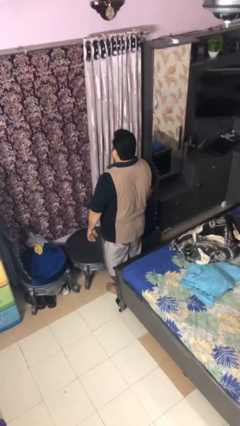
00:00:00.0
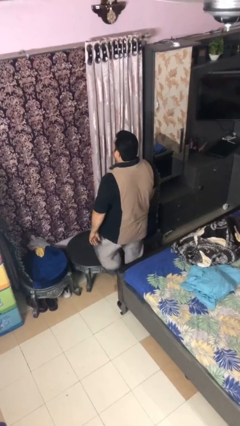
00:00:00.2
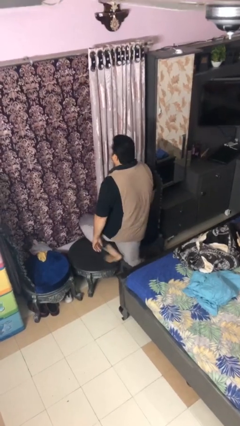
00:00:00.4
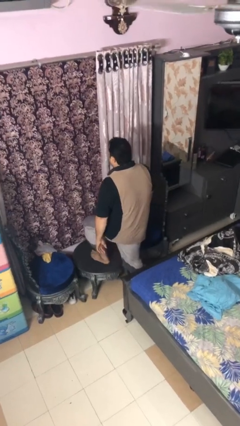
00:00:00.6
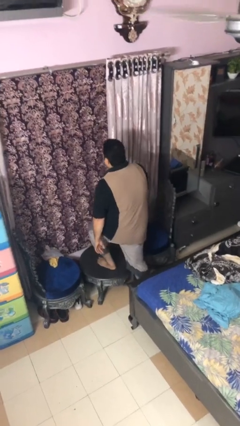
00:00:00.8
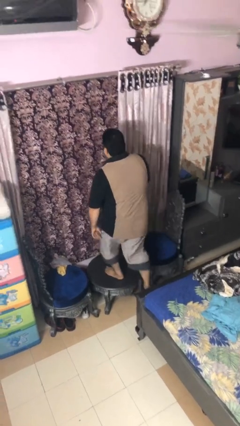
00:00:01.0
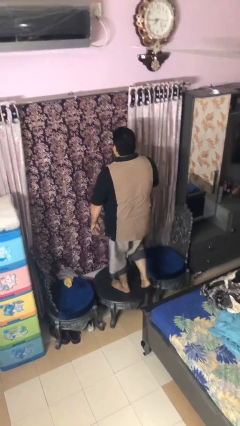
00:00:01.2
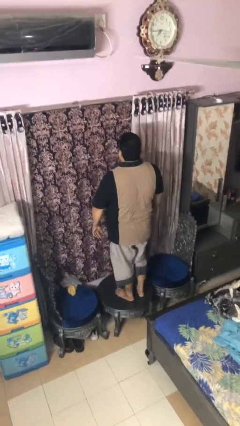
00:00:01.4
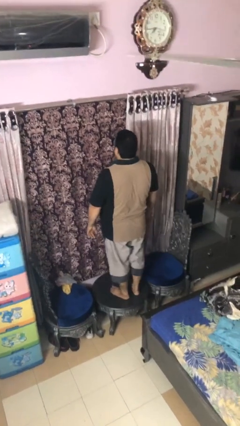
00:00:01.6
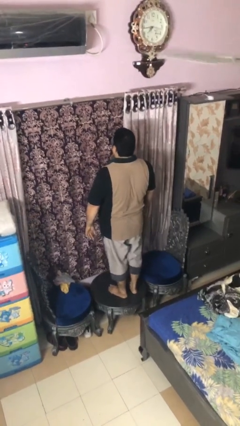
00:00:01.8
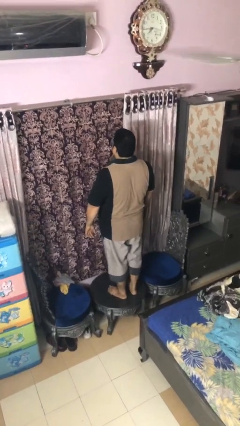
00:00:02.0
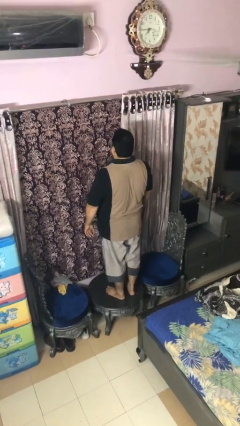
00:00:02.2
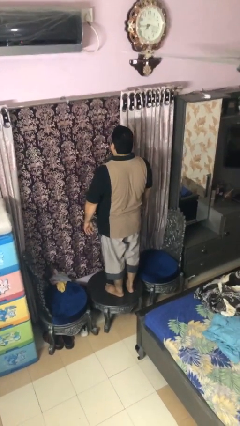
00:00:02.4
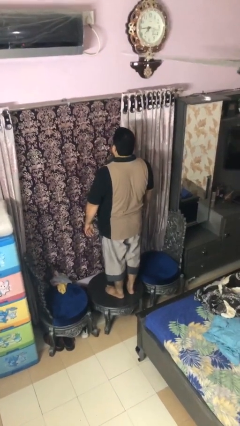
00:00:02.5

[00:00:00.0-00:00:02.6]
person climbs on table

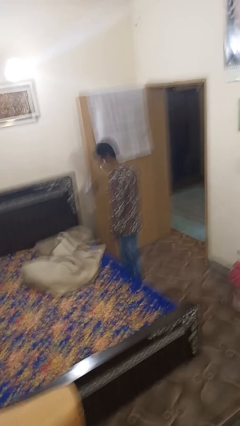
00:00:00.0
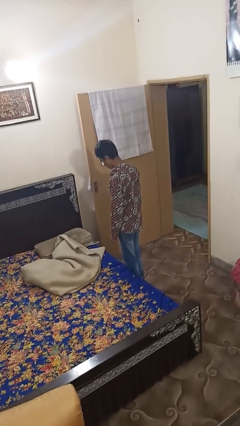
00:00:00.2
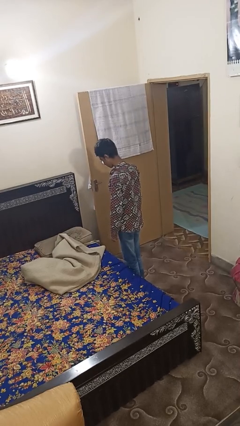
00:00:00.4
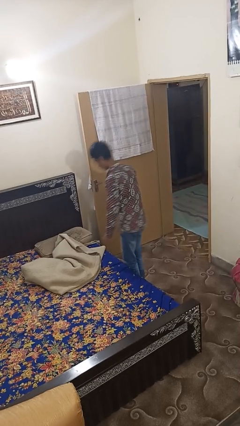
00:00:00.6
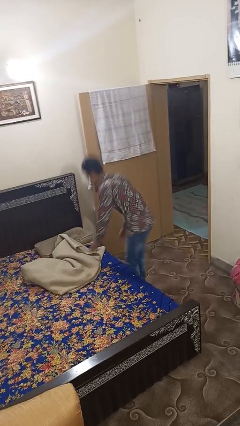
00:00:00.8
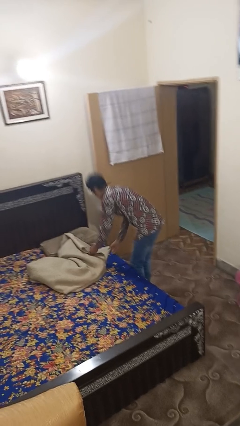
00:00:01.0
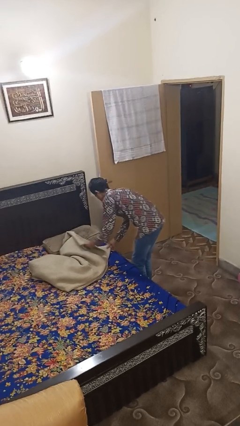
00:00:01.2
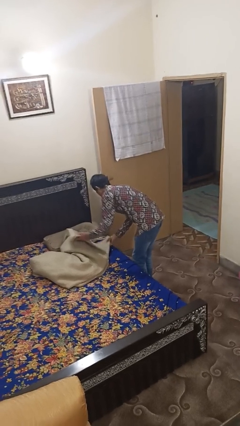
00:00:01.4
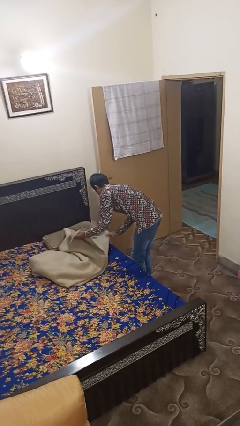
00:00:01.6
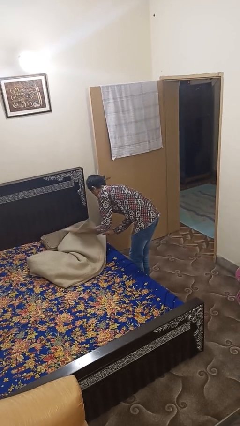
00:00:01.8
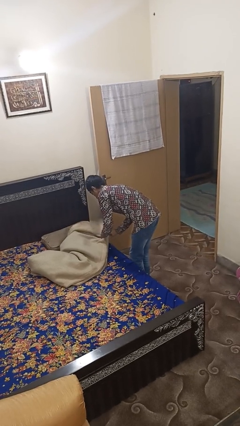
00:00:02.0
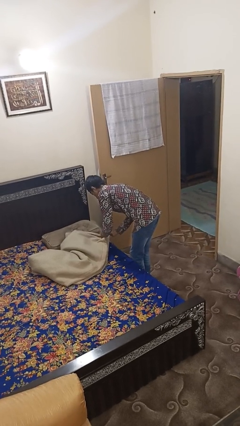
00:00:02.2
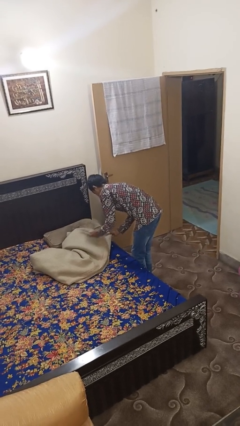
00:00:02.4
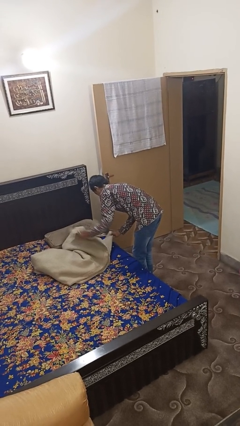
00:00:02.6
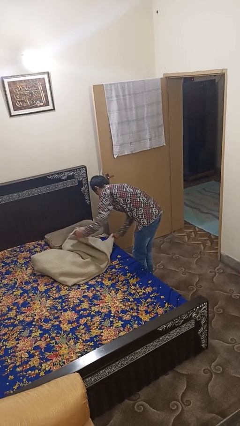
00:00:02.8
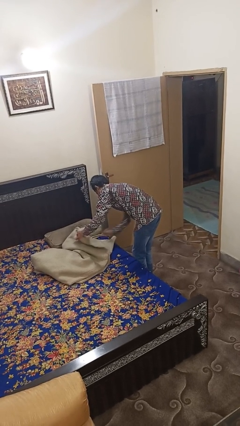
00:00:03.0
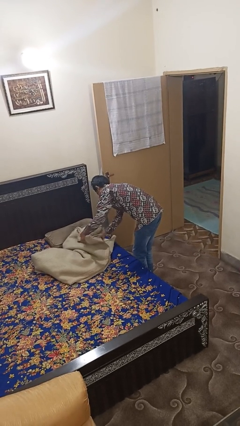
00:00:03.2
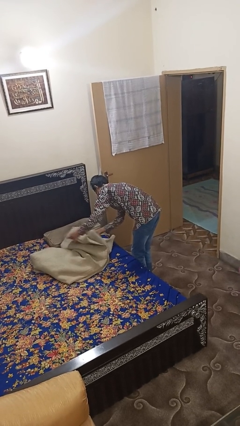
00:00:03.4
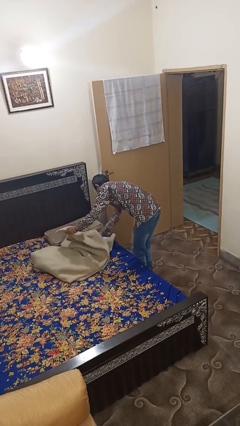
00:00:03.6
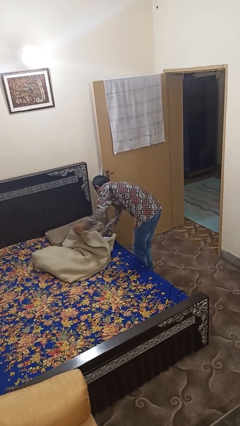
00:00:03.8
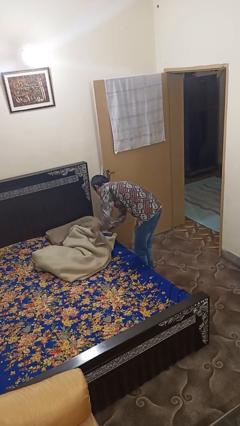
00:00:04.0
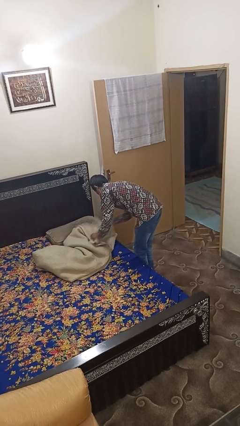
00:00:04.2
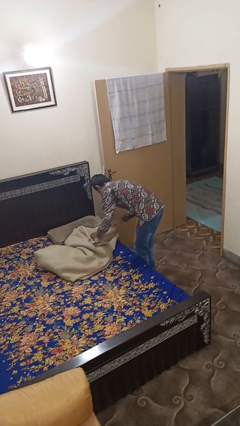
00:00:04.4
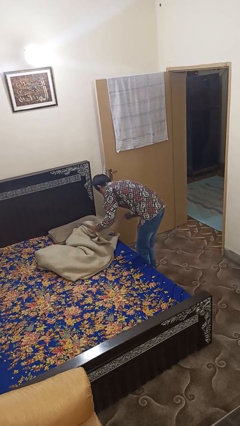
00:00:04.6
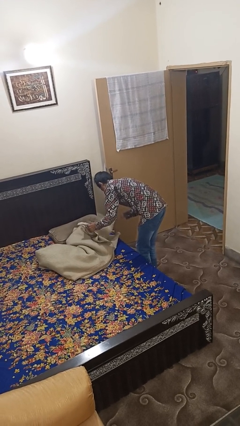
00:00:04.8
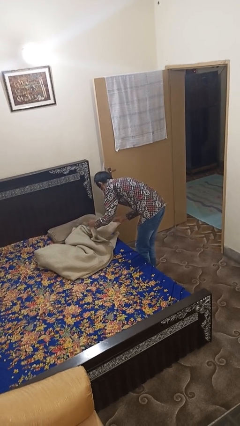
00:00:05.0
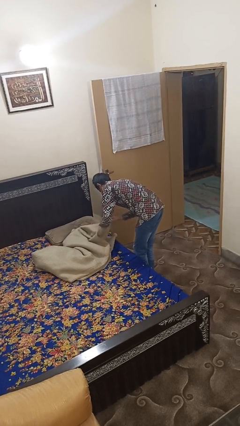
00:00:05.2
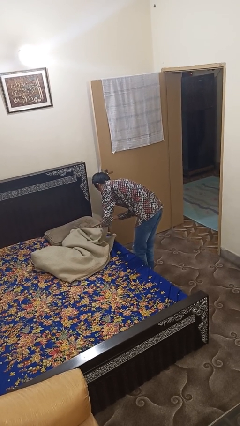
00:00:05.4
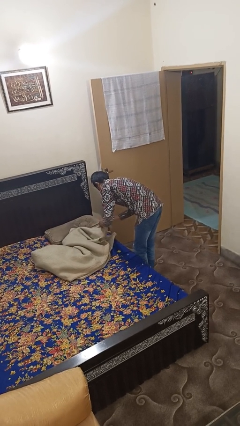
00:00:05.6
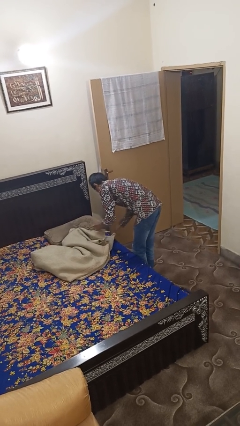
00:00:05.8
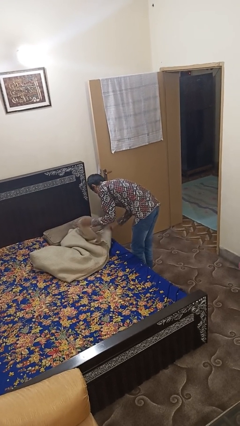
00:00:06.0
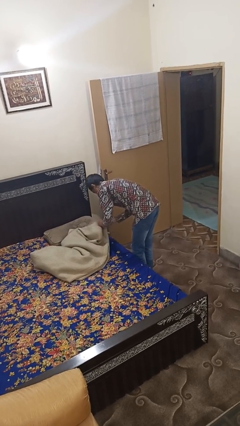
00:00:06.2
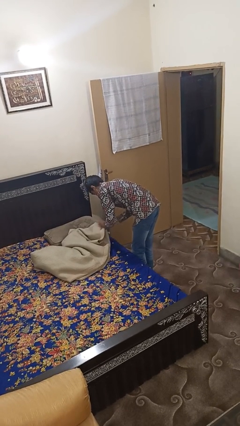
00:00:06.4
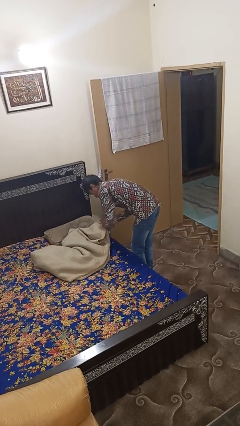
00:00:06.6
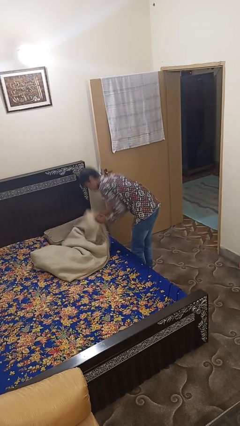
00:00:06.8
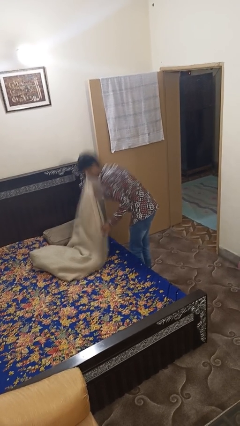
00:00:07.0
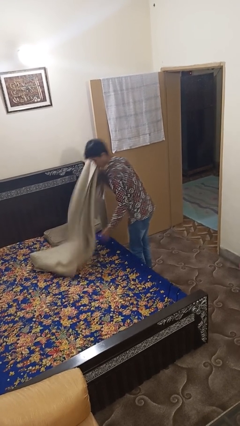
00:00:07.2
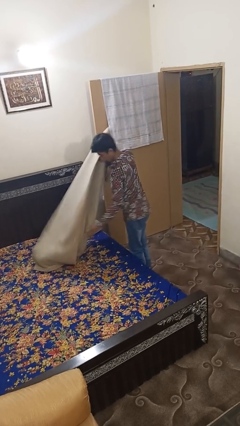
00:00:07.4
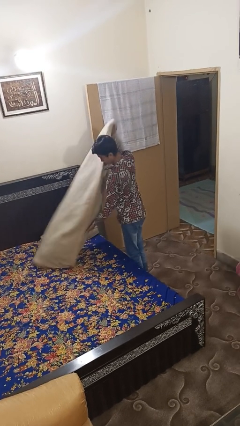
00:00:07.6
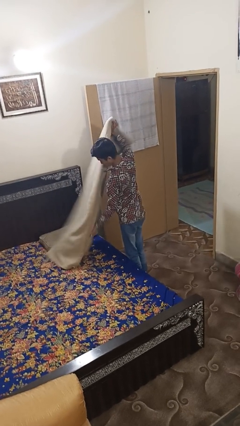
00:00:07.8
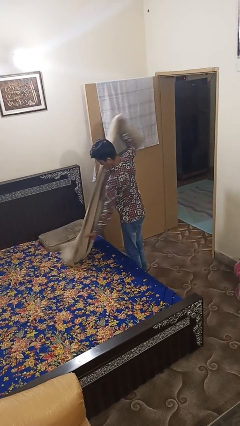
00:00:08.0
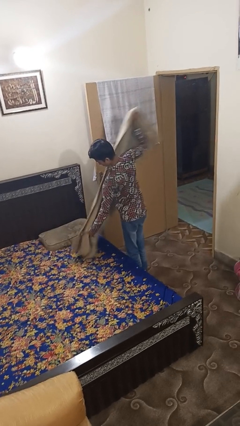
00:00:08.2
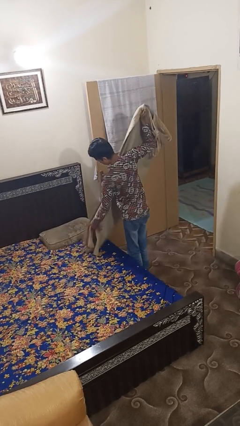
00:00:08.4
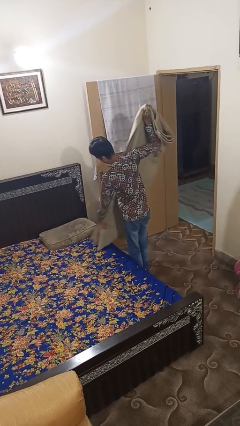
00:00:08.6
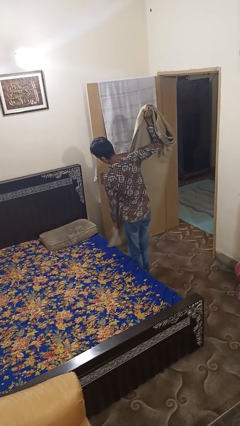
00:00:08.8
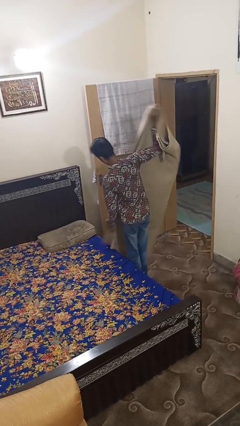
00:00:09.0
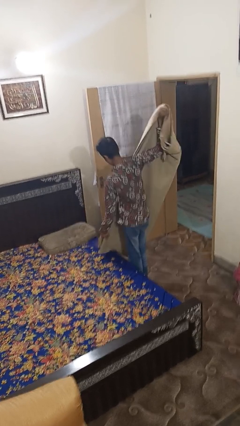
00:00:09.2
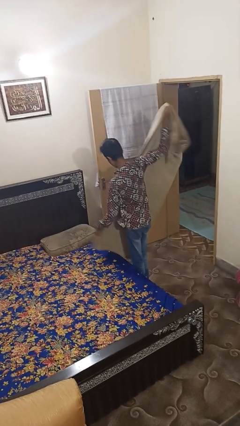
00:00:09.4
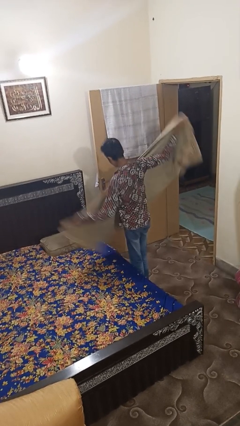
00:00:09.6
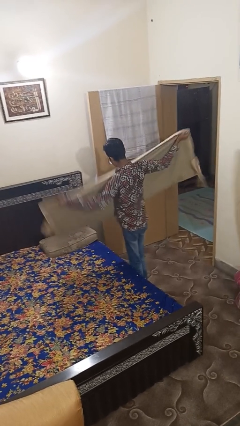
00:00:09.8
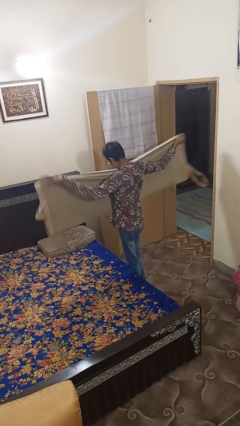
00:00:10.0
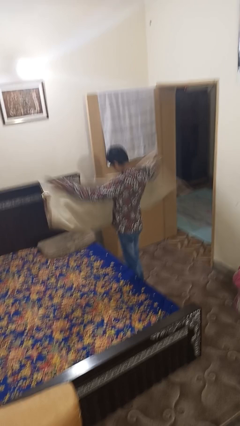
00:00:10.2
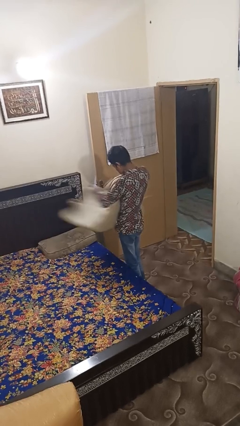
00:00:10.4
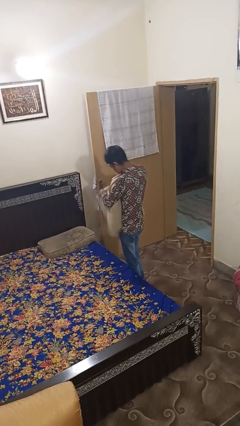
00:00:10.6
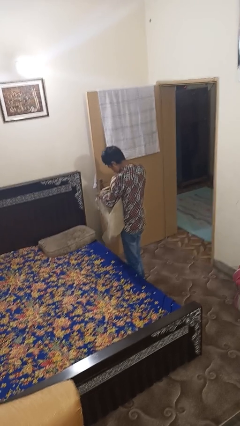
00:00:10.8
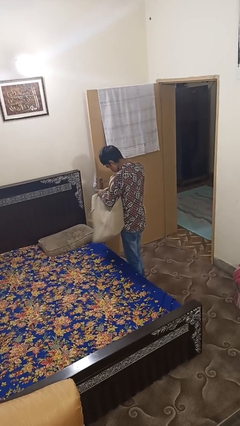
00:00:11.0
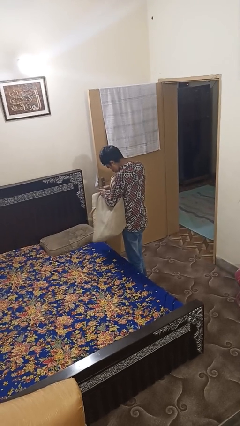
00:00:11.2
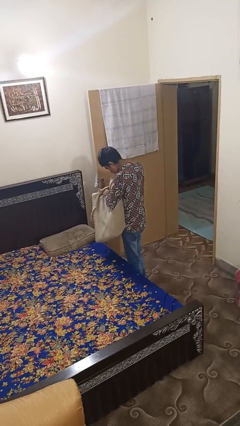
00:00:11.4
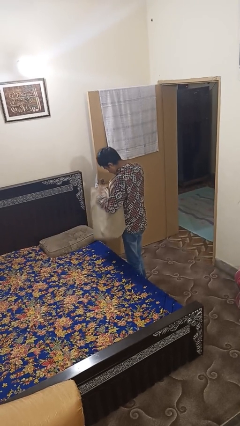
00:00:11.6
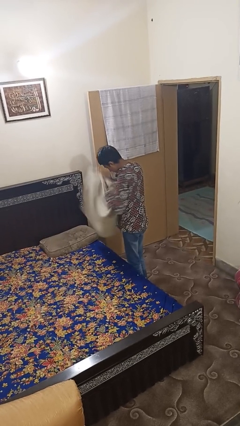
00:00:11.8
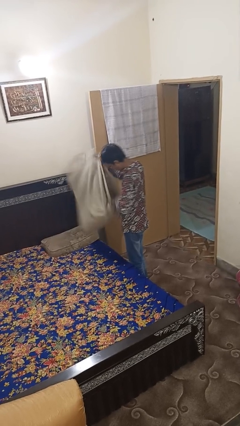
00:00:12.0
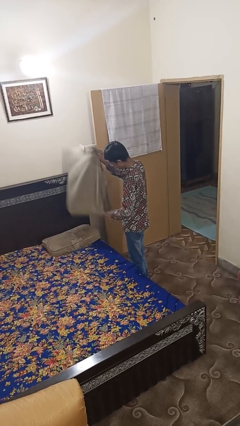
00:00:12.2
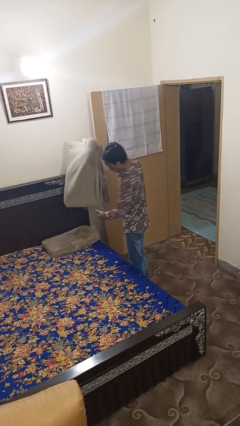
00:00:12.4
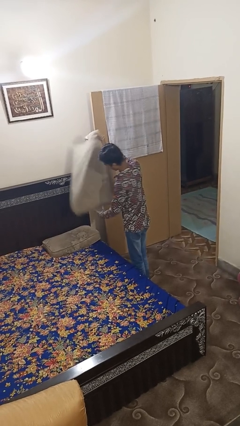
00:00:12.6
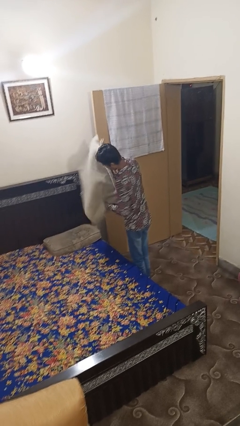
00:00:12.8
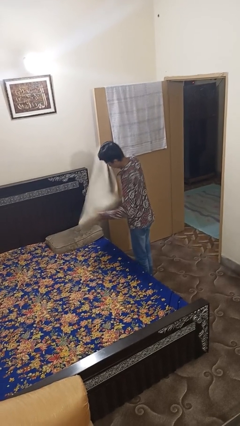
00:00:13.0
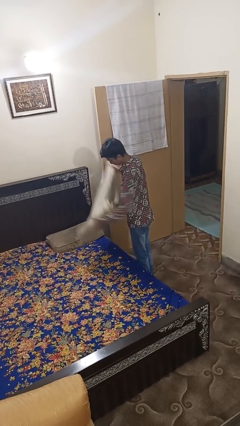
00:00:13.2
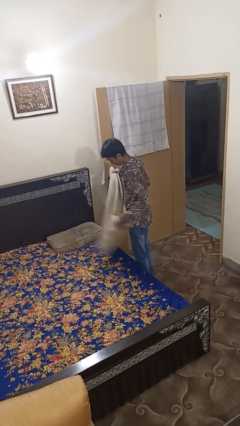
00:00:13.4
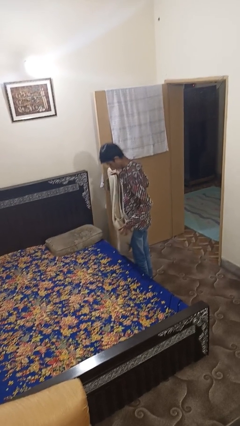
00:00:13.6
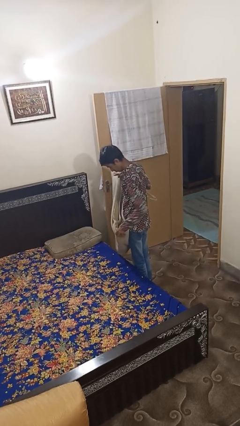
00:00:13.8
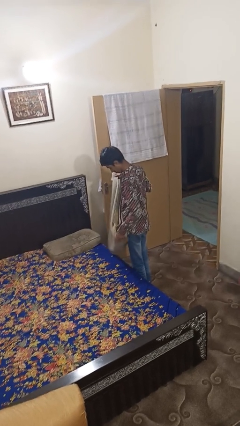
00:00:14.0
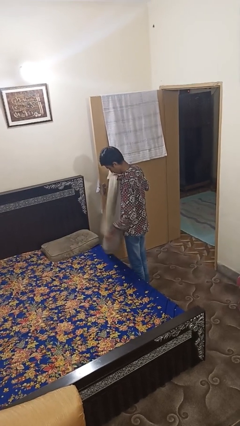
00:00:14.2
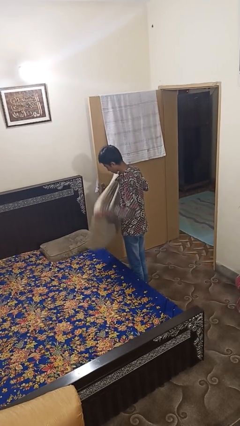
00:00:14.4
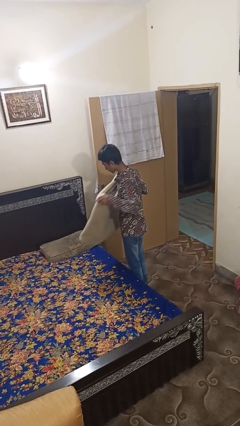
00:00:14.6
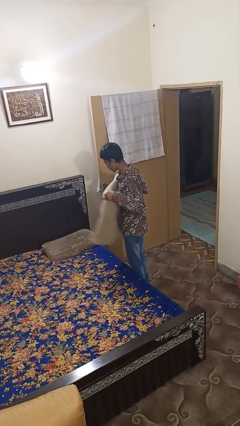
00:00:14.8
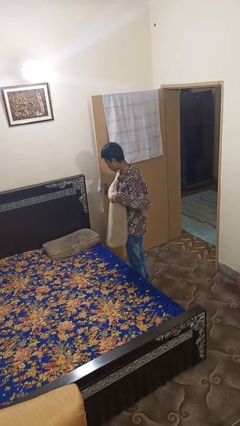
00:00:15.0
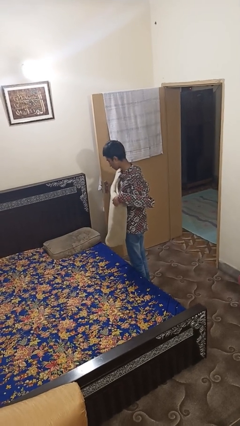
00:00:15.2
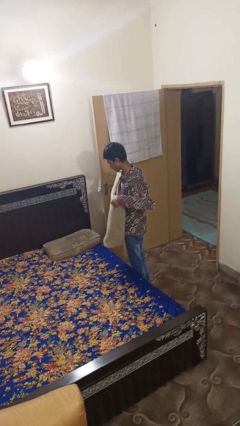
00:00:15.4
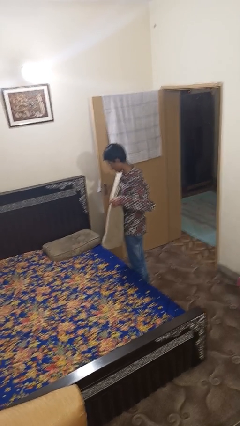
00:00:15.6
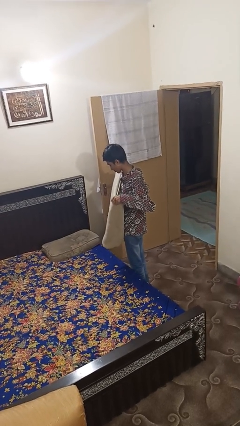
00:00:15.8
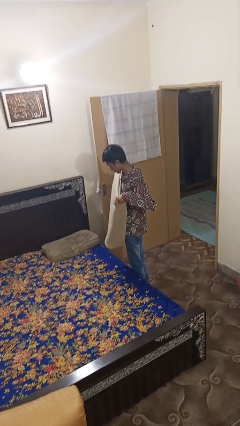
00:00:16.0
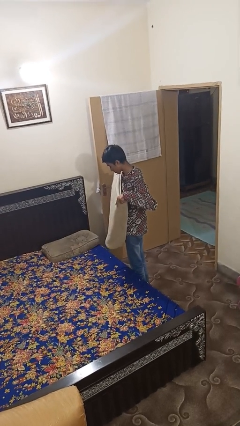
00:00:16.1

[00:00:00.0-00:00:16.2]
person folds blanket
